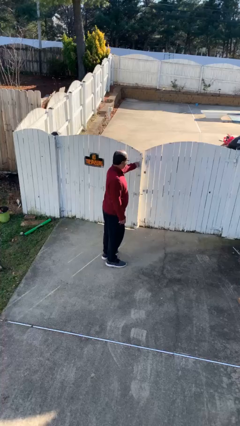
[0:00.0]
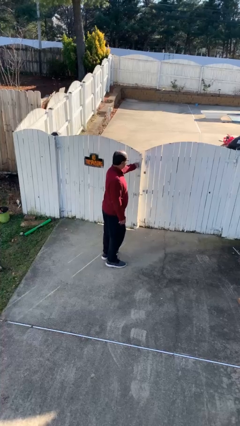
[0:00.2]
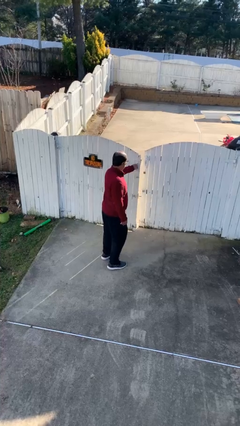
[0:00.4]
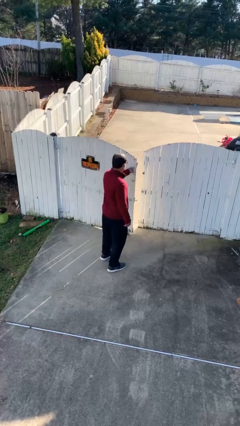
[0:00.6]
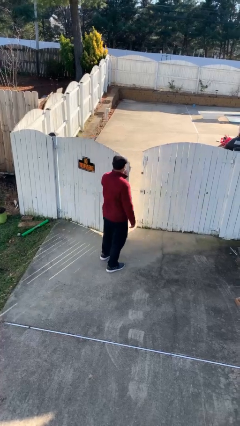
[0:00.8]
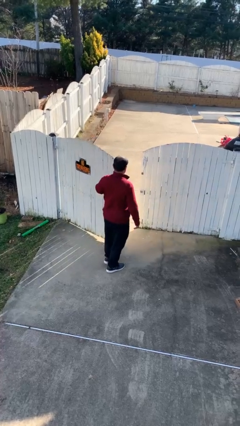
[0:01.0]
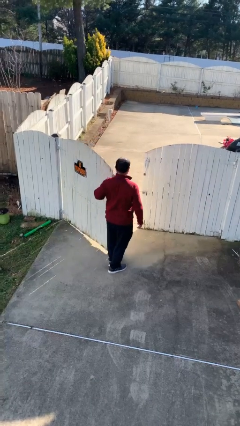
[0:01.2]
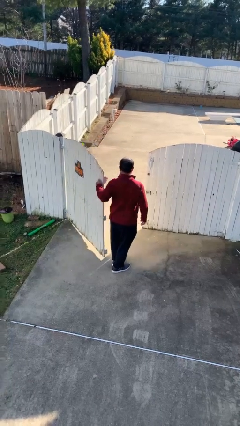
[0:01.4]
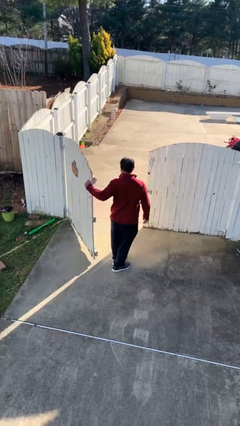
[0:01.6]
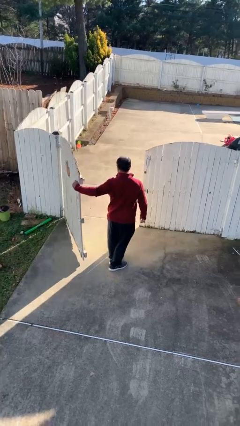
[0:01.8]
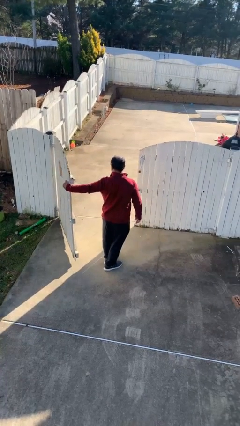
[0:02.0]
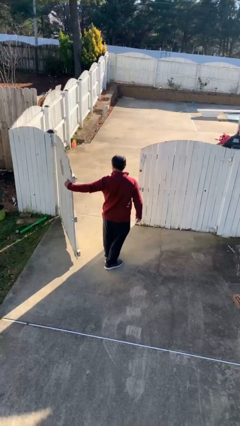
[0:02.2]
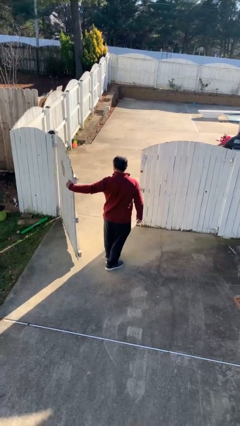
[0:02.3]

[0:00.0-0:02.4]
person opens facility door

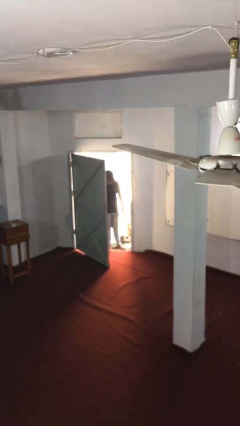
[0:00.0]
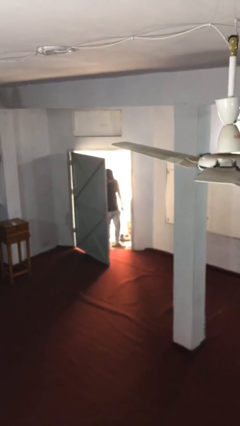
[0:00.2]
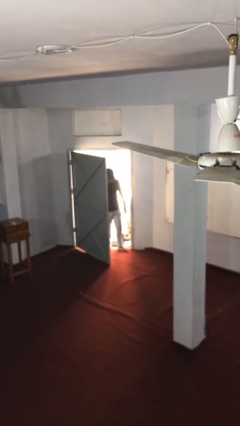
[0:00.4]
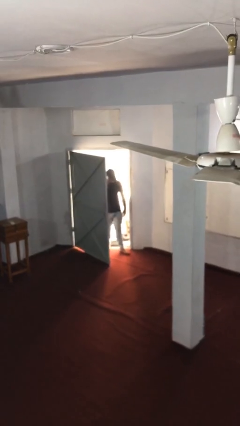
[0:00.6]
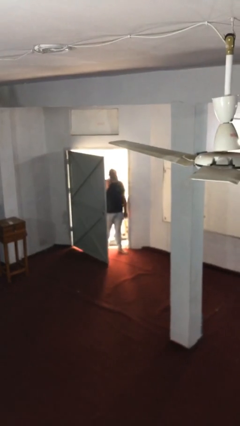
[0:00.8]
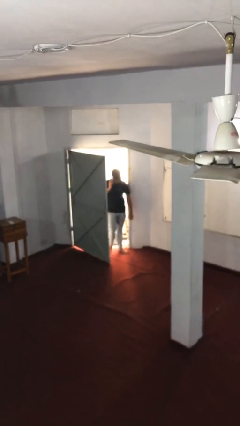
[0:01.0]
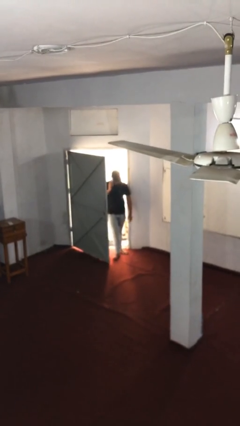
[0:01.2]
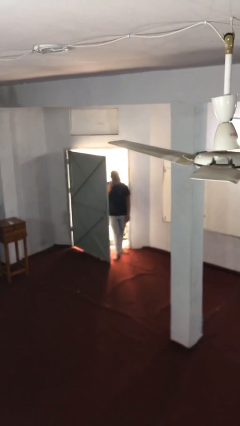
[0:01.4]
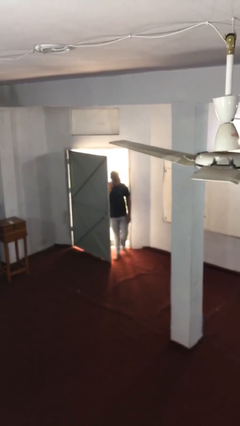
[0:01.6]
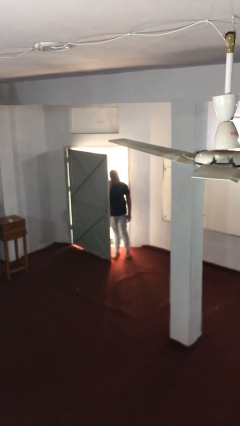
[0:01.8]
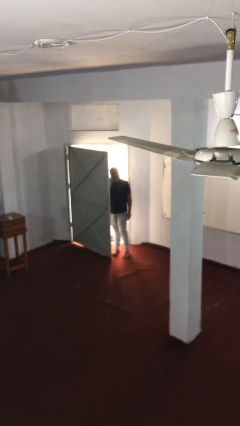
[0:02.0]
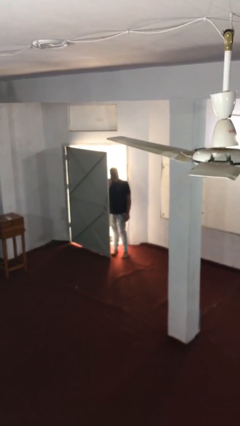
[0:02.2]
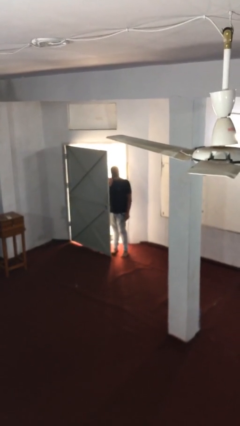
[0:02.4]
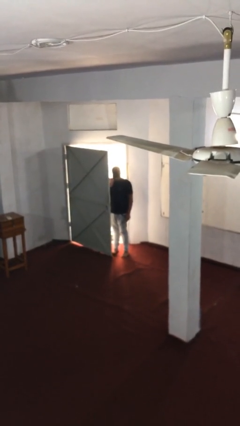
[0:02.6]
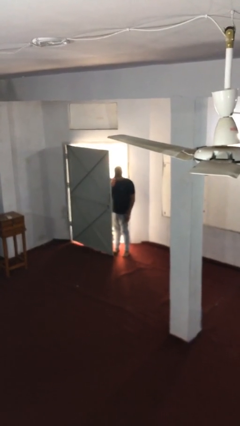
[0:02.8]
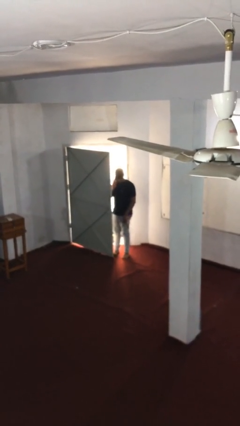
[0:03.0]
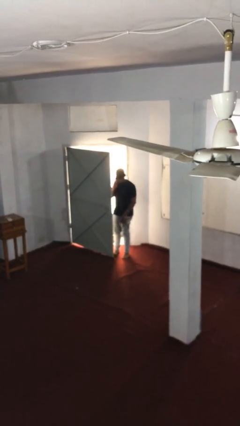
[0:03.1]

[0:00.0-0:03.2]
person enters scene through structure

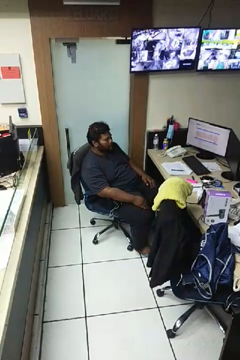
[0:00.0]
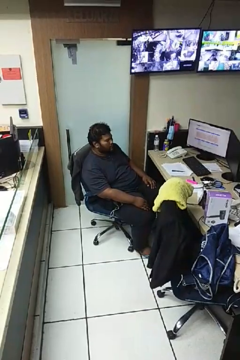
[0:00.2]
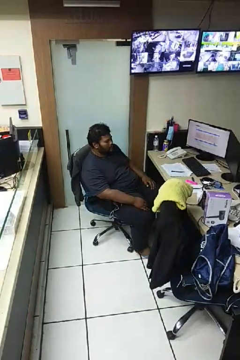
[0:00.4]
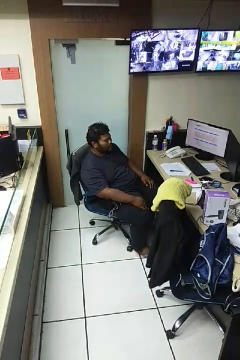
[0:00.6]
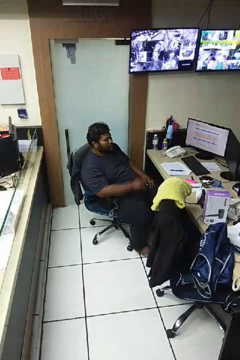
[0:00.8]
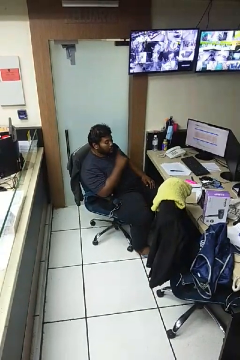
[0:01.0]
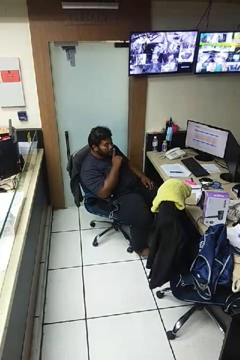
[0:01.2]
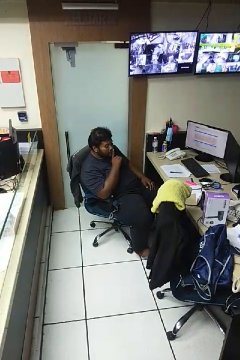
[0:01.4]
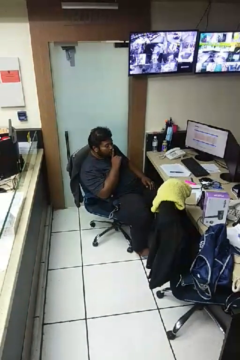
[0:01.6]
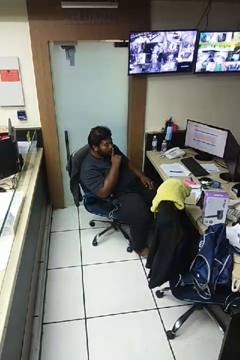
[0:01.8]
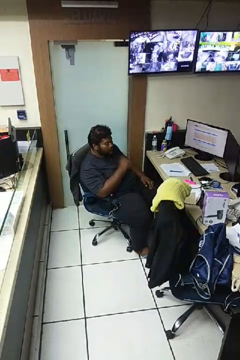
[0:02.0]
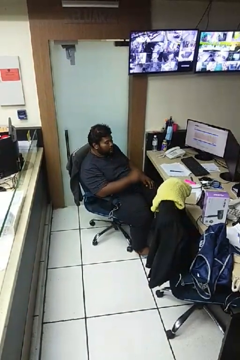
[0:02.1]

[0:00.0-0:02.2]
person gestures be quiet

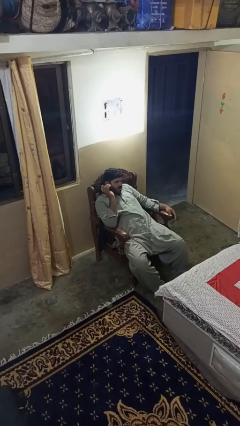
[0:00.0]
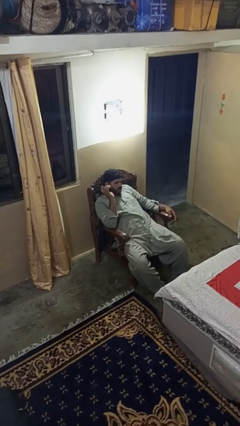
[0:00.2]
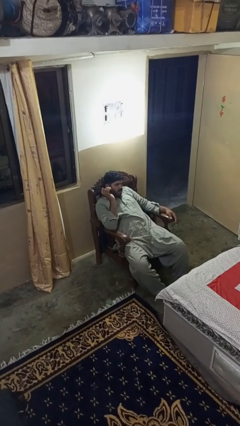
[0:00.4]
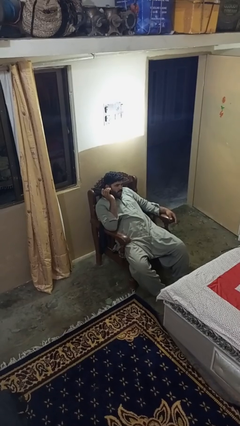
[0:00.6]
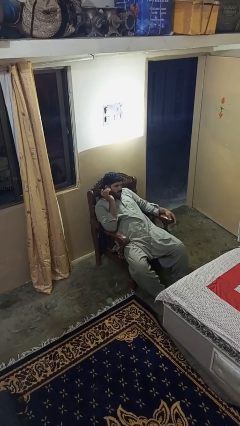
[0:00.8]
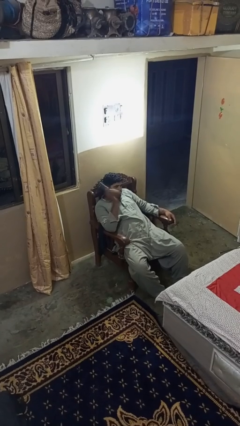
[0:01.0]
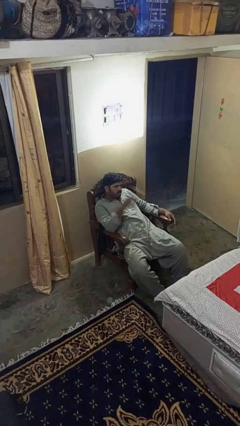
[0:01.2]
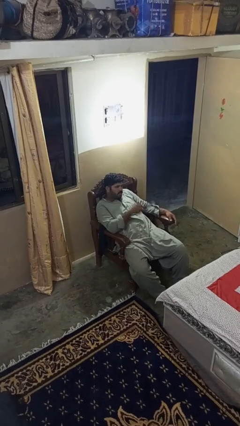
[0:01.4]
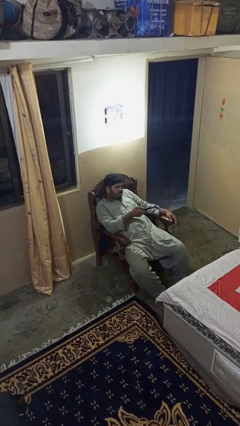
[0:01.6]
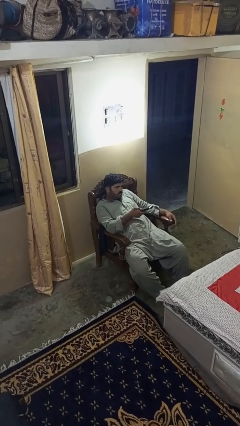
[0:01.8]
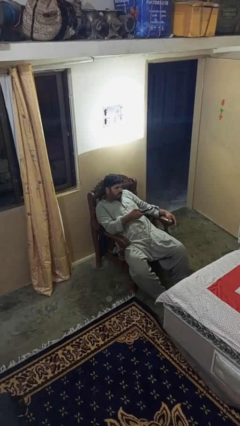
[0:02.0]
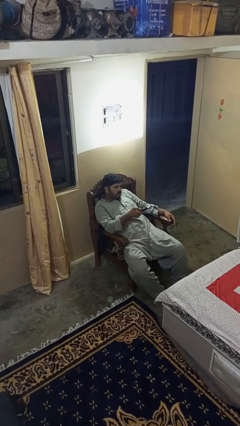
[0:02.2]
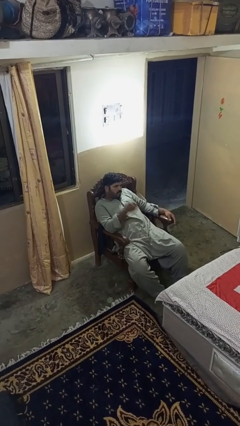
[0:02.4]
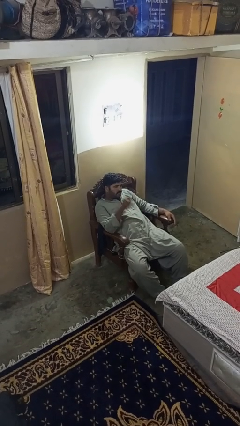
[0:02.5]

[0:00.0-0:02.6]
person uses television remote

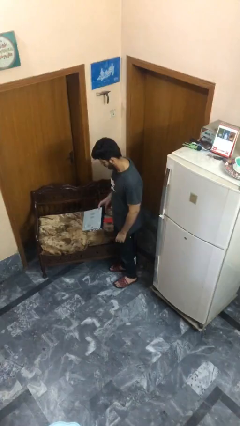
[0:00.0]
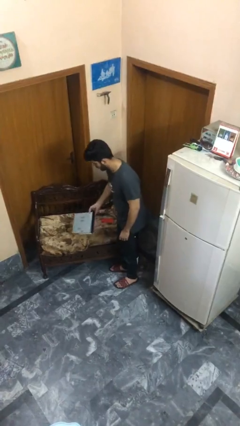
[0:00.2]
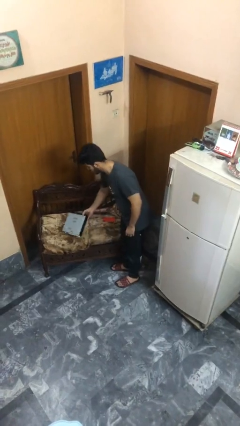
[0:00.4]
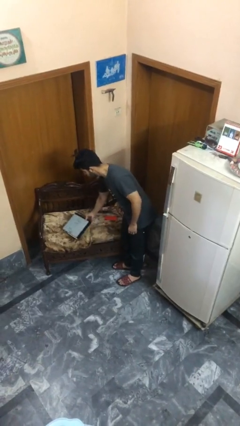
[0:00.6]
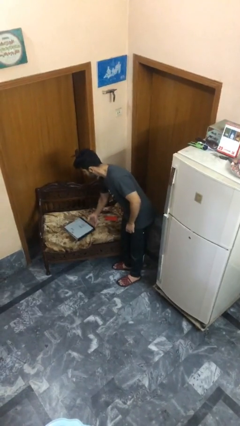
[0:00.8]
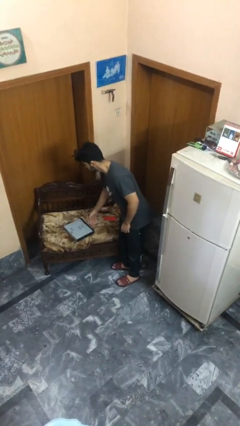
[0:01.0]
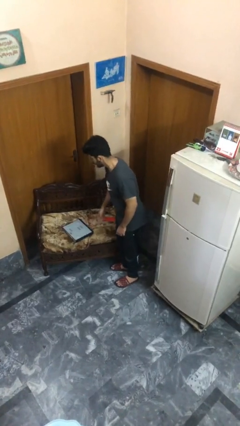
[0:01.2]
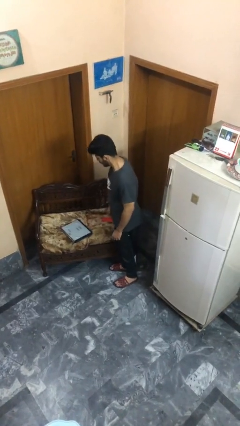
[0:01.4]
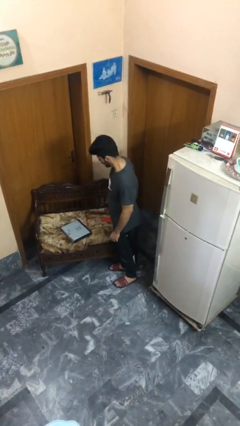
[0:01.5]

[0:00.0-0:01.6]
person puts down object on couch

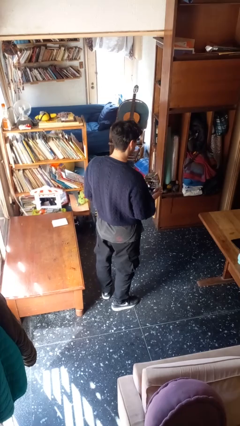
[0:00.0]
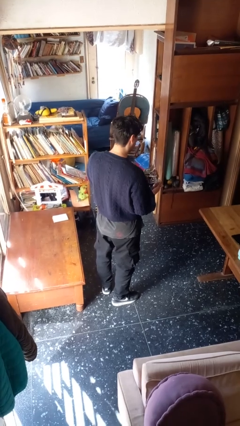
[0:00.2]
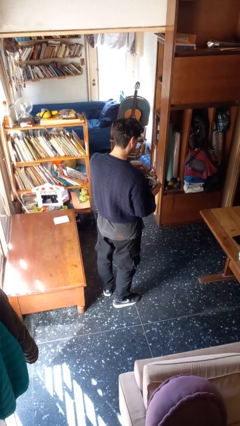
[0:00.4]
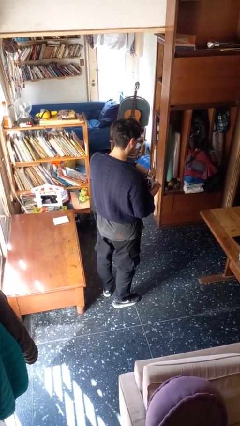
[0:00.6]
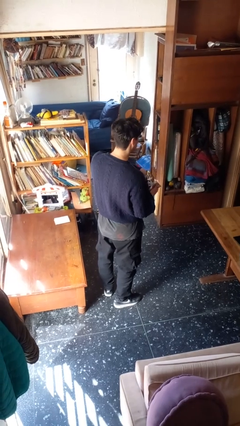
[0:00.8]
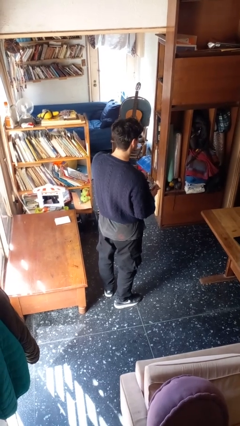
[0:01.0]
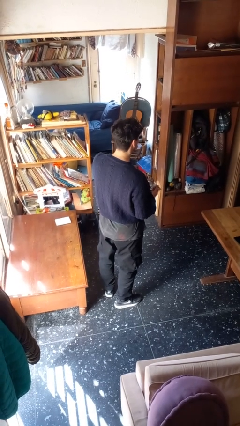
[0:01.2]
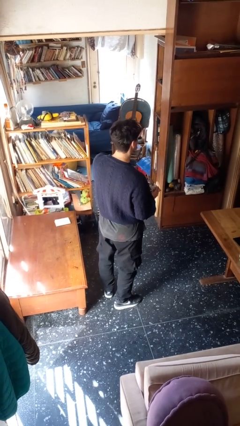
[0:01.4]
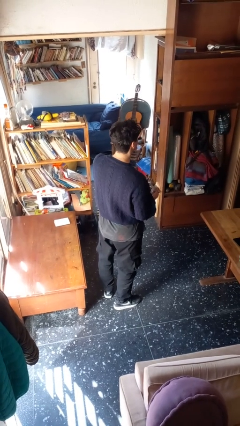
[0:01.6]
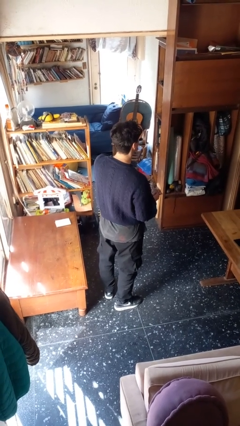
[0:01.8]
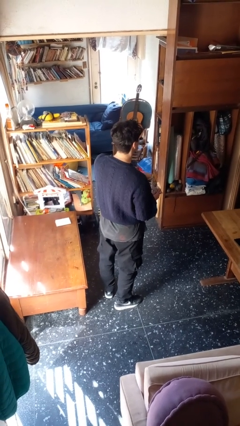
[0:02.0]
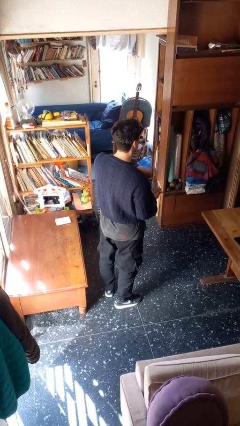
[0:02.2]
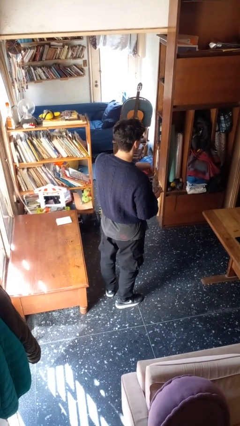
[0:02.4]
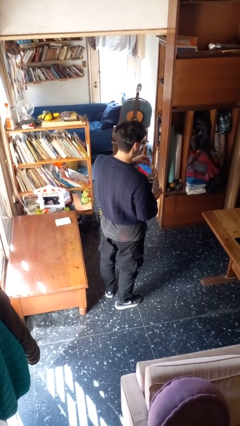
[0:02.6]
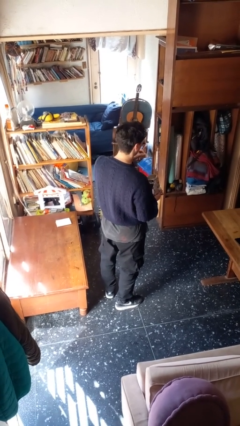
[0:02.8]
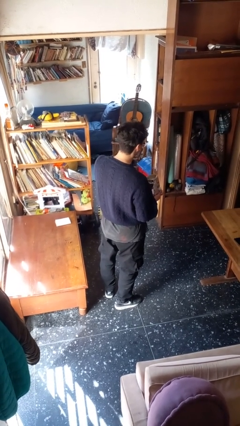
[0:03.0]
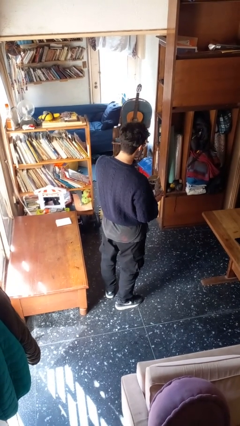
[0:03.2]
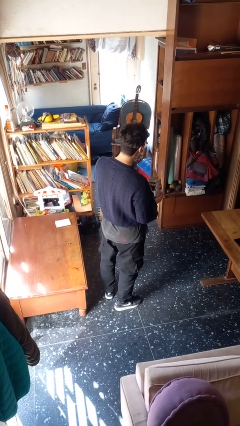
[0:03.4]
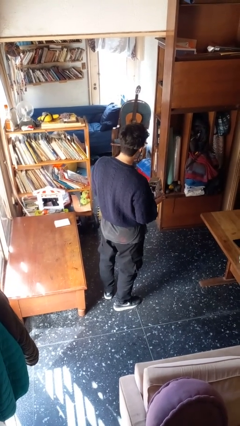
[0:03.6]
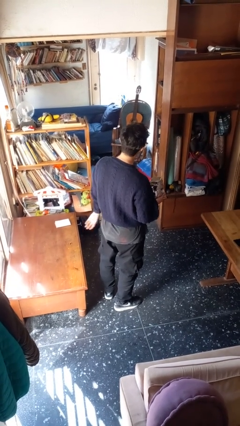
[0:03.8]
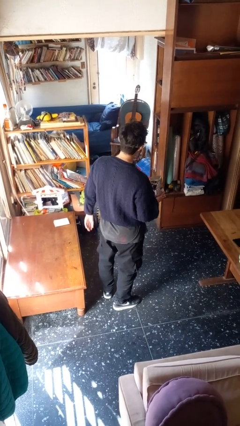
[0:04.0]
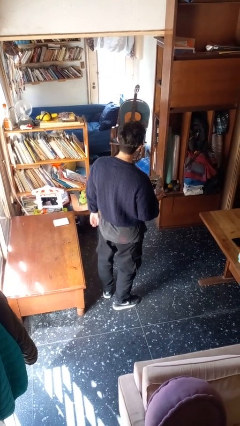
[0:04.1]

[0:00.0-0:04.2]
person eats snack from bag

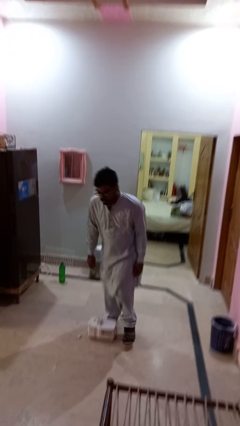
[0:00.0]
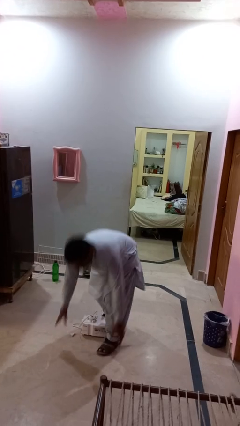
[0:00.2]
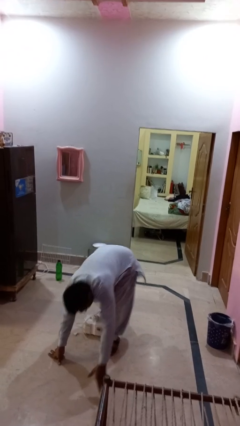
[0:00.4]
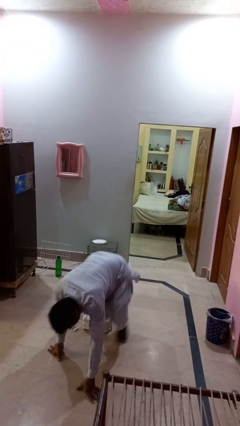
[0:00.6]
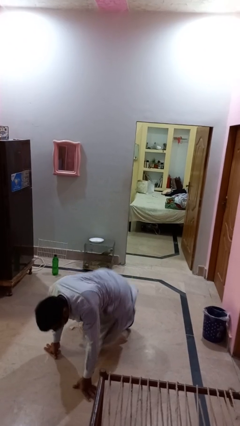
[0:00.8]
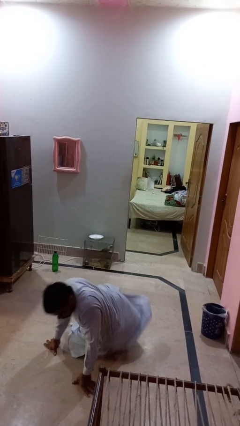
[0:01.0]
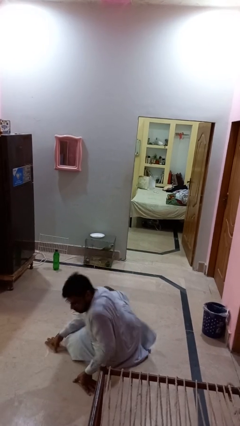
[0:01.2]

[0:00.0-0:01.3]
person trips on object on floor

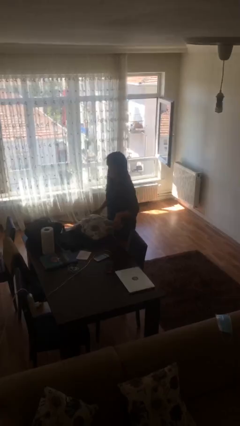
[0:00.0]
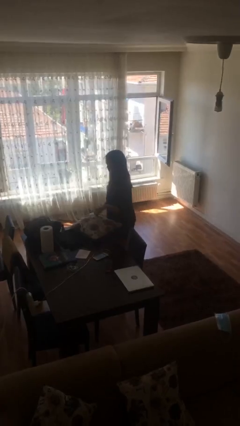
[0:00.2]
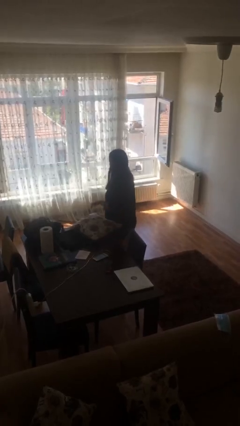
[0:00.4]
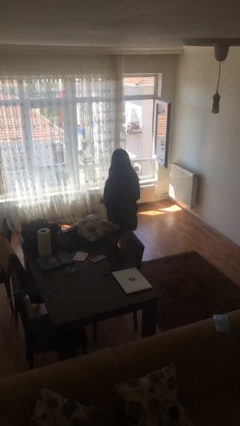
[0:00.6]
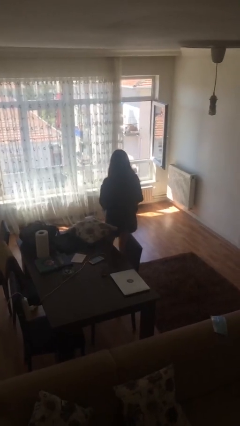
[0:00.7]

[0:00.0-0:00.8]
person puts down object on table
